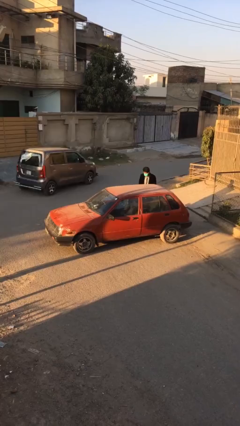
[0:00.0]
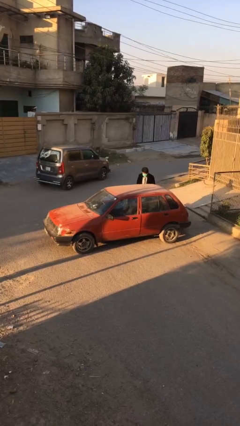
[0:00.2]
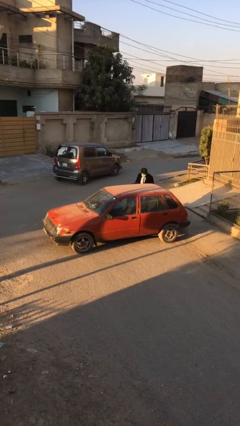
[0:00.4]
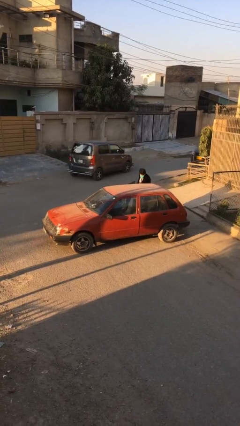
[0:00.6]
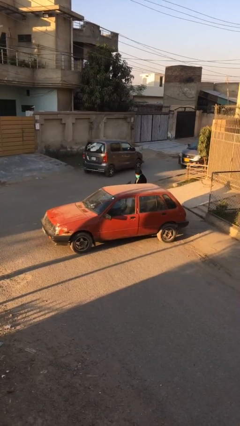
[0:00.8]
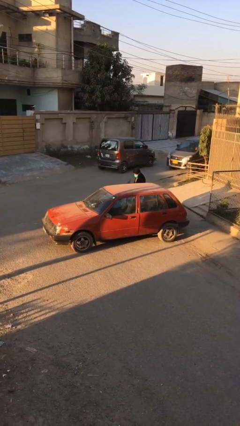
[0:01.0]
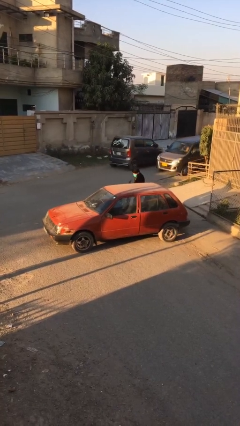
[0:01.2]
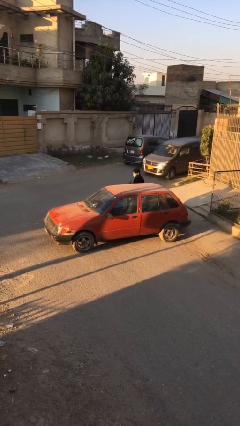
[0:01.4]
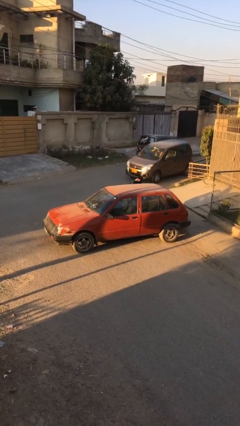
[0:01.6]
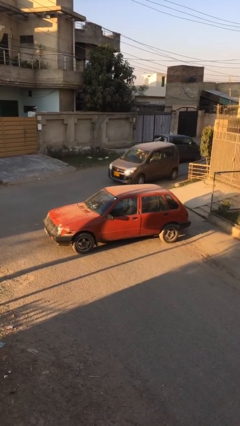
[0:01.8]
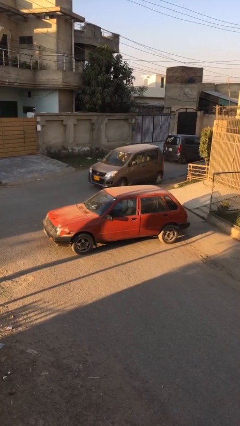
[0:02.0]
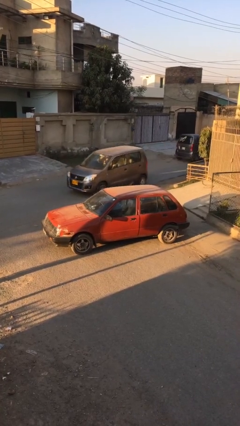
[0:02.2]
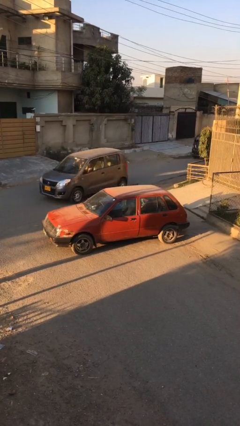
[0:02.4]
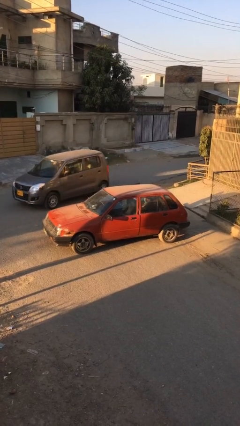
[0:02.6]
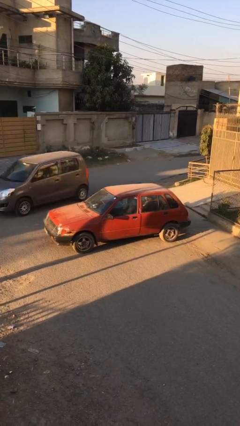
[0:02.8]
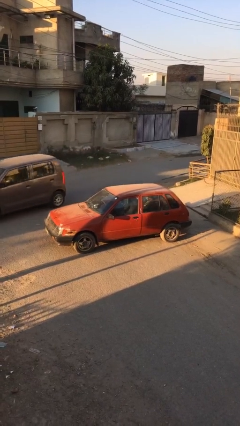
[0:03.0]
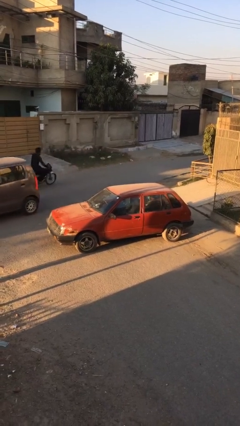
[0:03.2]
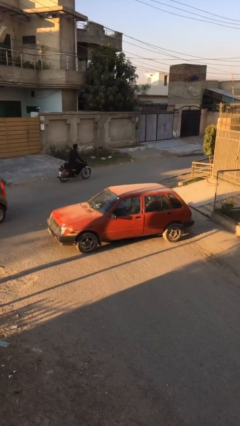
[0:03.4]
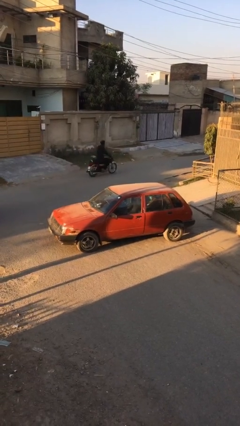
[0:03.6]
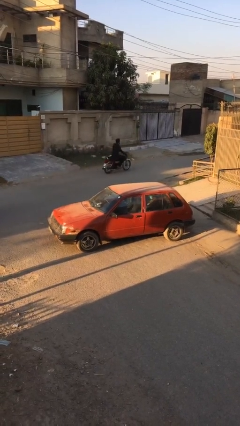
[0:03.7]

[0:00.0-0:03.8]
car picks up person

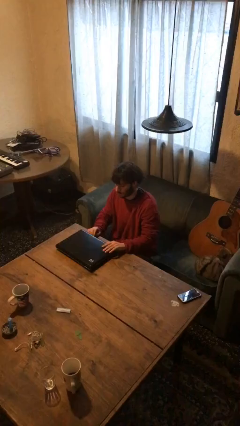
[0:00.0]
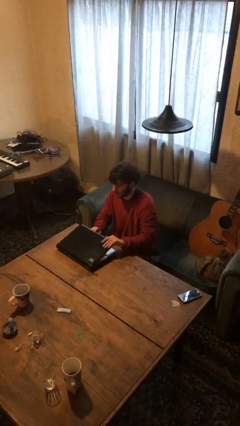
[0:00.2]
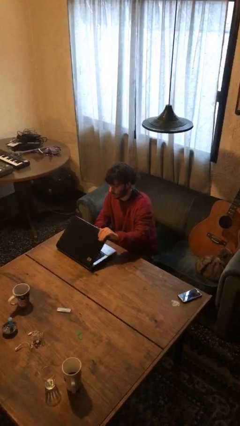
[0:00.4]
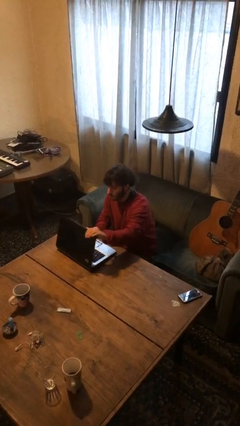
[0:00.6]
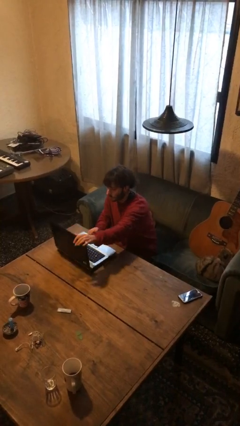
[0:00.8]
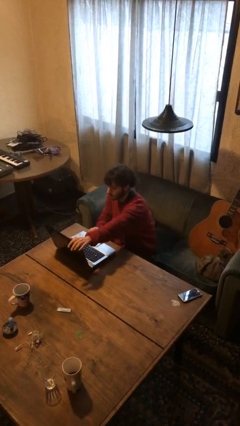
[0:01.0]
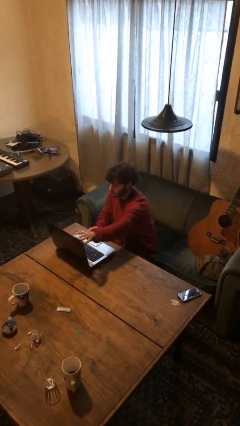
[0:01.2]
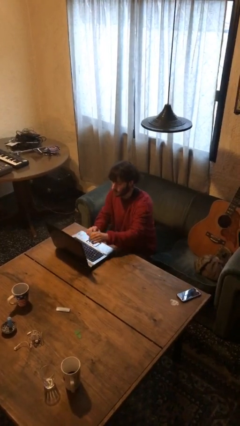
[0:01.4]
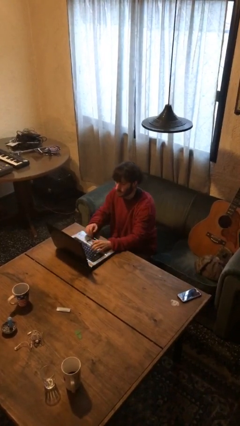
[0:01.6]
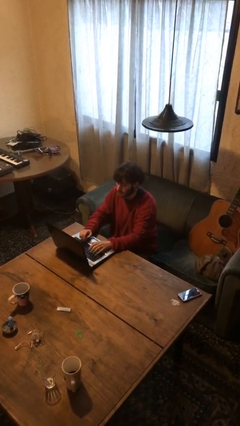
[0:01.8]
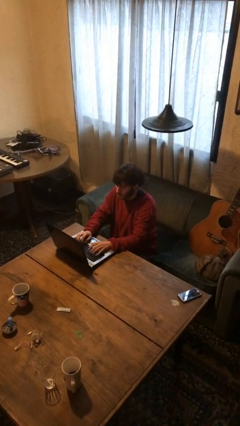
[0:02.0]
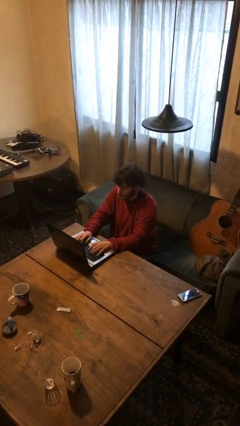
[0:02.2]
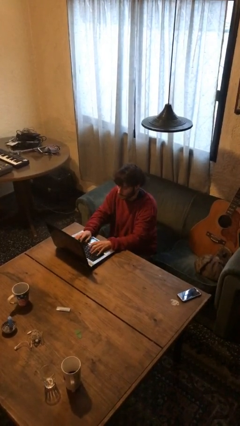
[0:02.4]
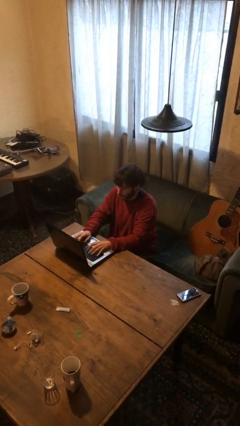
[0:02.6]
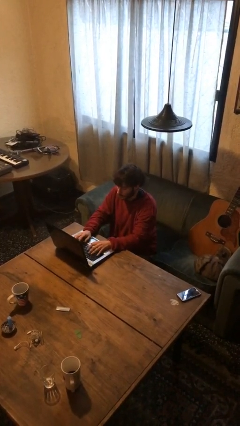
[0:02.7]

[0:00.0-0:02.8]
person opens laptop

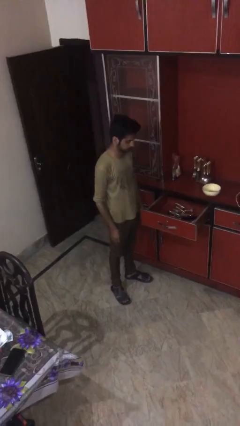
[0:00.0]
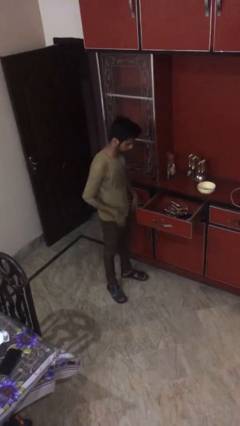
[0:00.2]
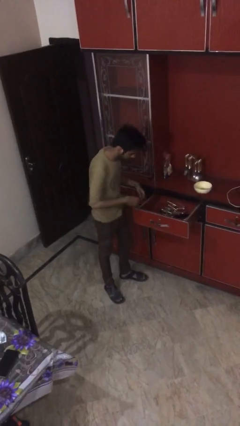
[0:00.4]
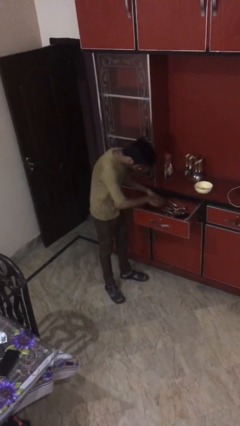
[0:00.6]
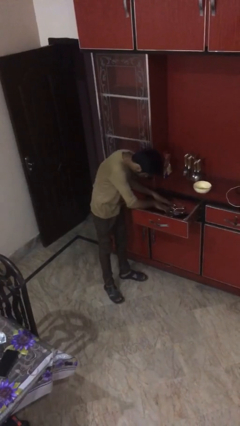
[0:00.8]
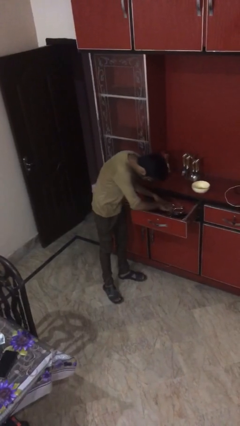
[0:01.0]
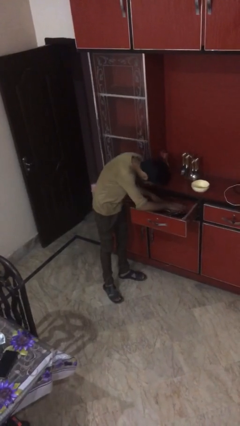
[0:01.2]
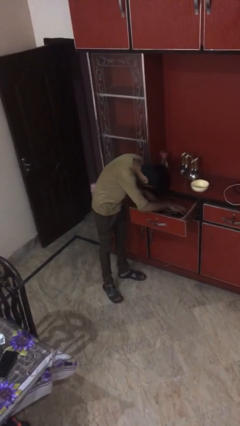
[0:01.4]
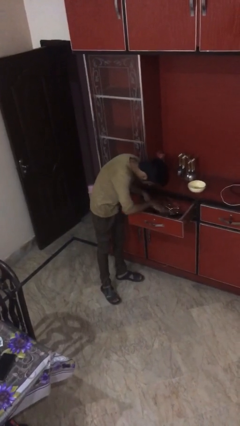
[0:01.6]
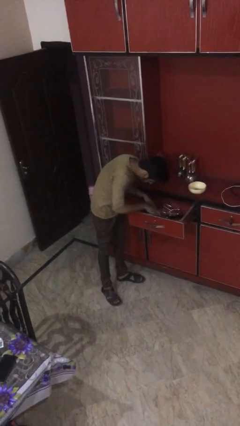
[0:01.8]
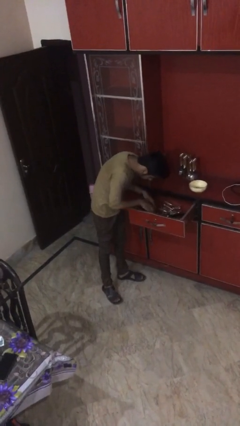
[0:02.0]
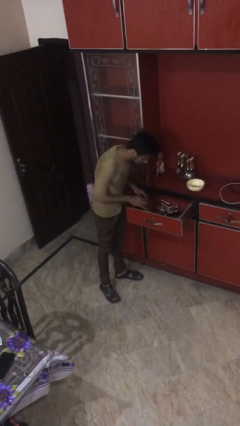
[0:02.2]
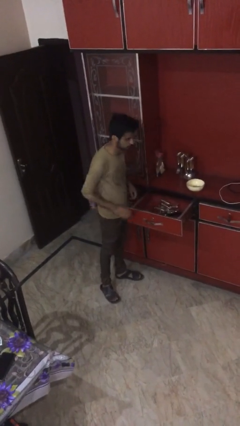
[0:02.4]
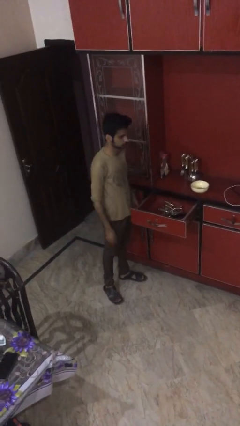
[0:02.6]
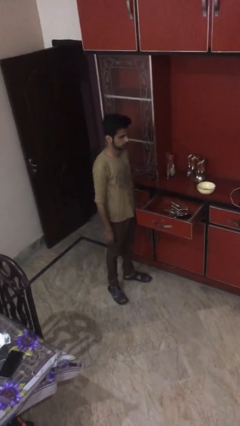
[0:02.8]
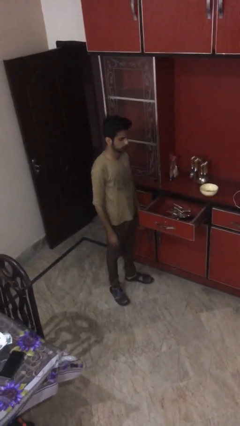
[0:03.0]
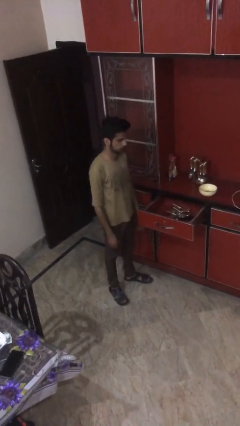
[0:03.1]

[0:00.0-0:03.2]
person searches in kitchen drawer

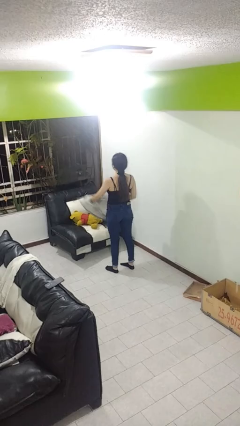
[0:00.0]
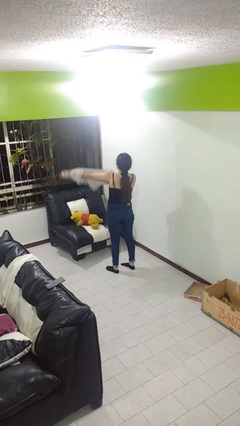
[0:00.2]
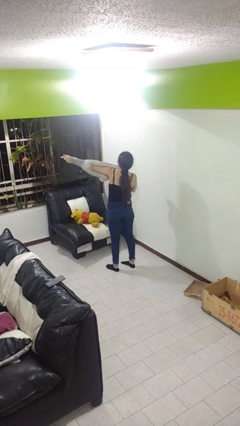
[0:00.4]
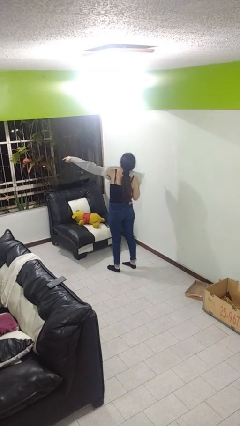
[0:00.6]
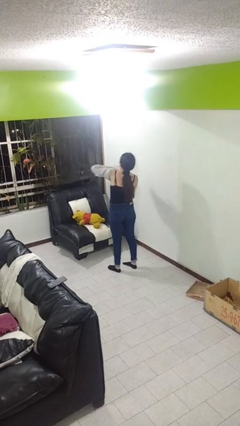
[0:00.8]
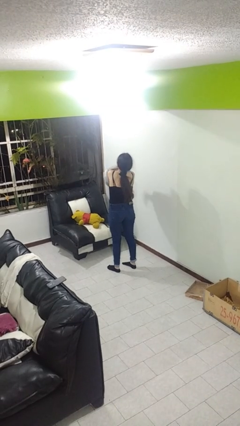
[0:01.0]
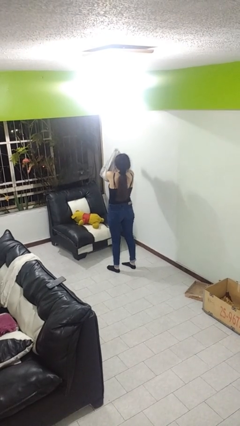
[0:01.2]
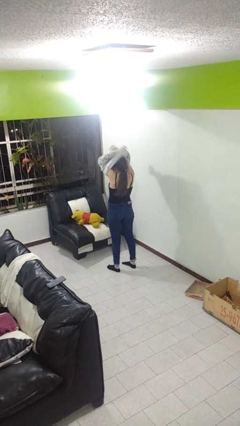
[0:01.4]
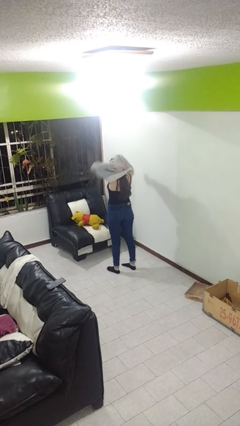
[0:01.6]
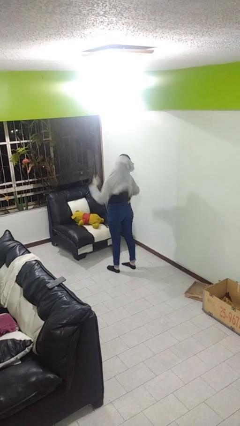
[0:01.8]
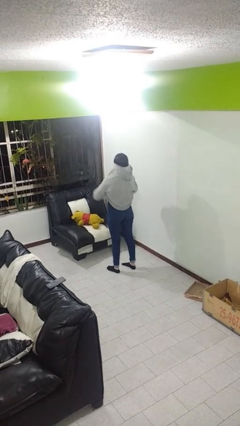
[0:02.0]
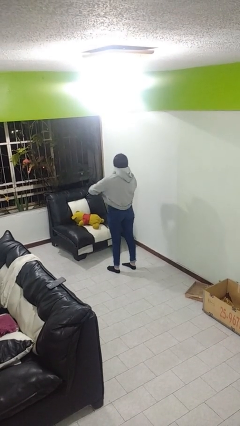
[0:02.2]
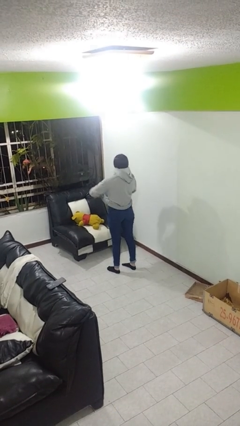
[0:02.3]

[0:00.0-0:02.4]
person puts on hoodie

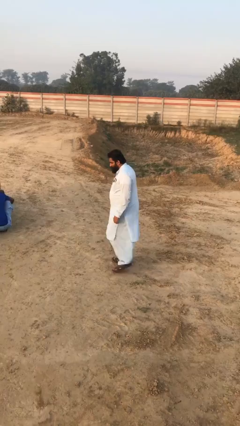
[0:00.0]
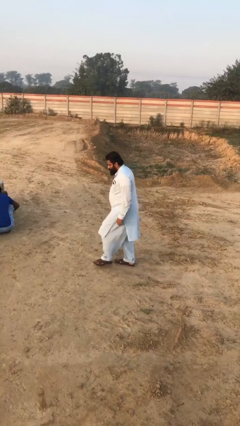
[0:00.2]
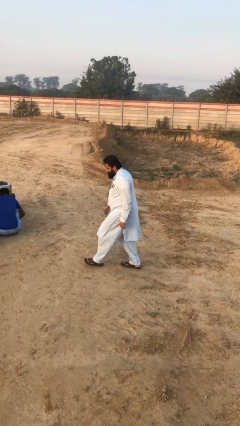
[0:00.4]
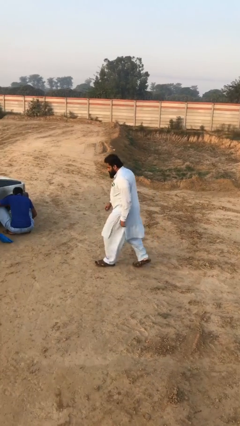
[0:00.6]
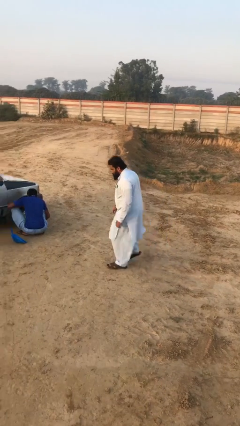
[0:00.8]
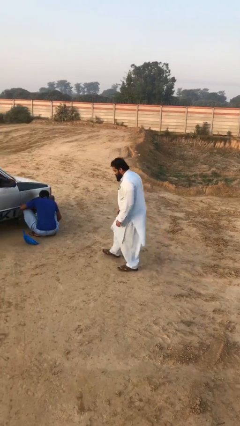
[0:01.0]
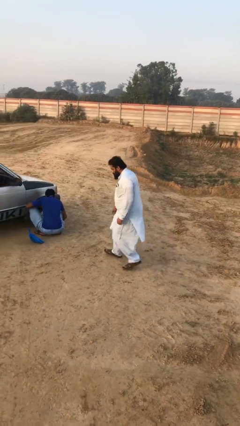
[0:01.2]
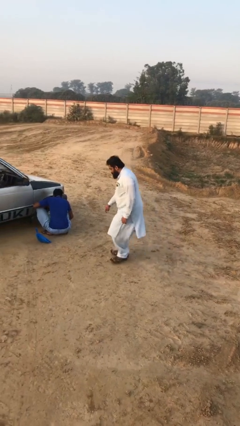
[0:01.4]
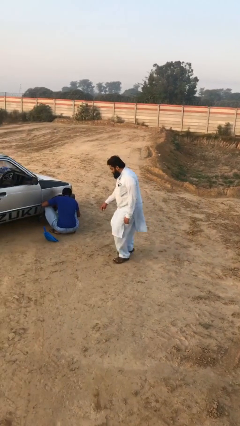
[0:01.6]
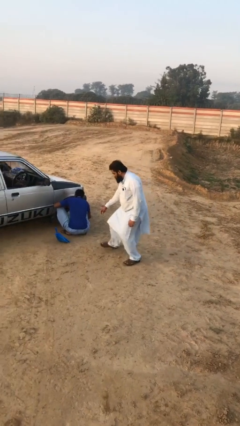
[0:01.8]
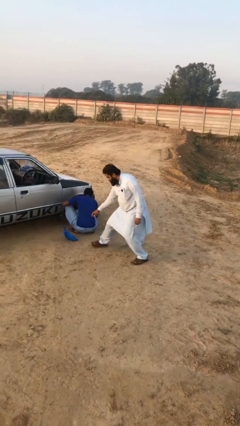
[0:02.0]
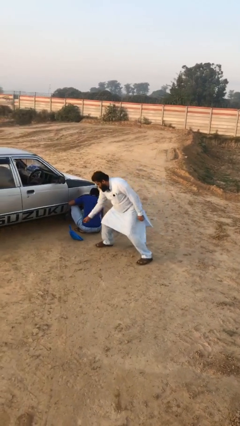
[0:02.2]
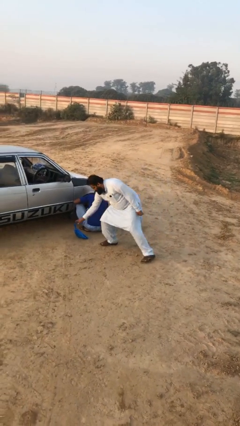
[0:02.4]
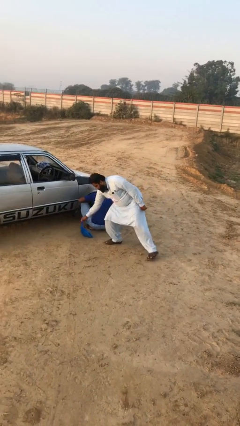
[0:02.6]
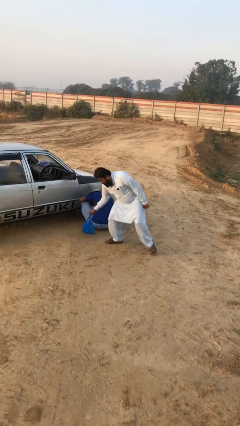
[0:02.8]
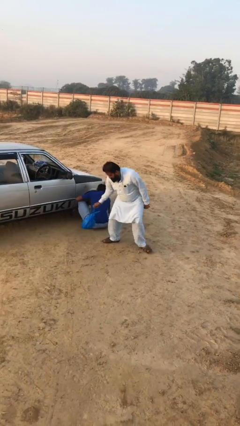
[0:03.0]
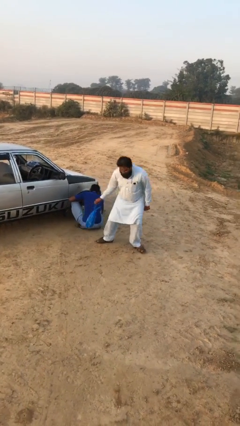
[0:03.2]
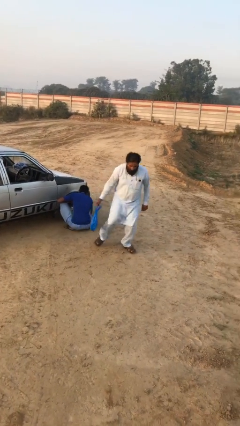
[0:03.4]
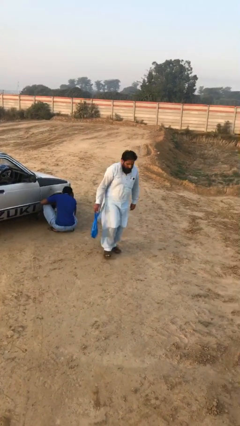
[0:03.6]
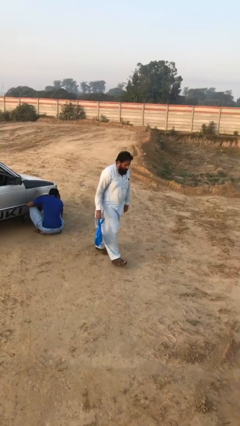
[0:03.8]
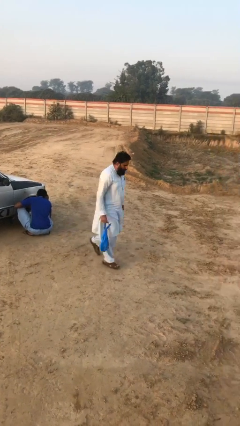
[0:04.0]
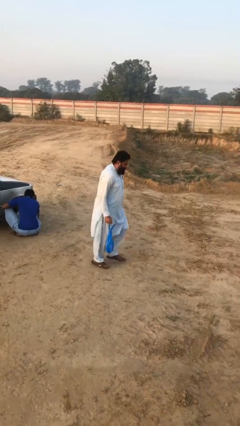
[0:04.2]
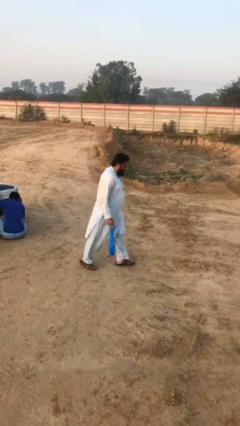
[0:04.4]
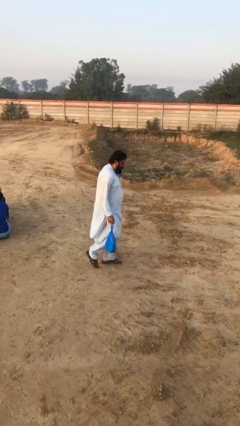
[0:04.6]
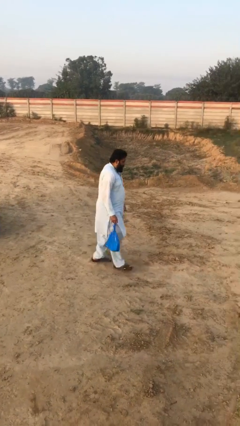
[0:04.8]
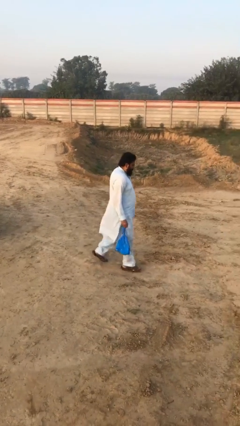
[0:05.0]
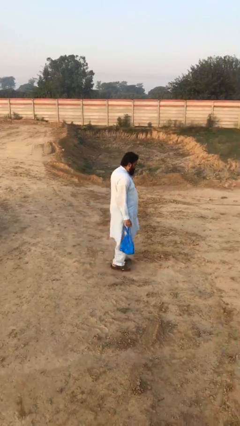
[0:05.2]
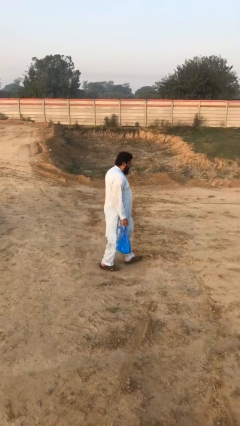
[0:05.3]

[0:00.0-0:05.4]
person steals object from person
